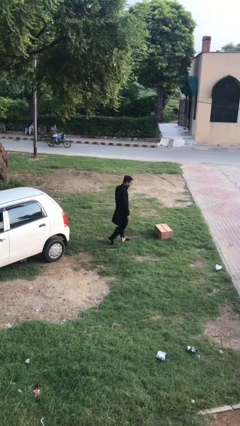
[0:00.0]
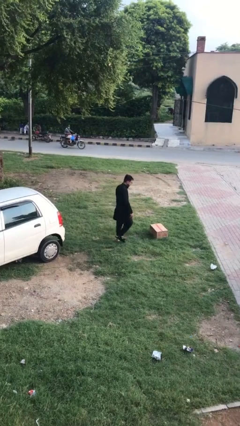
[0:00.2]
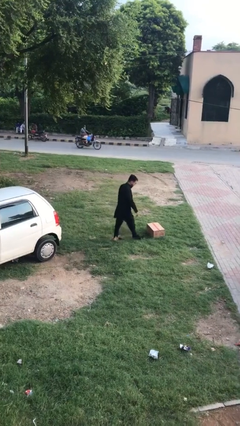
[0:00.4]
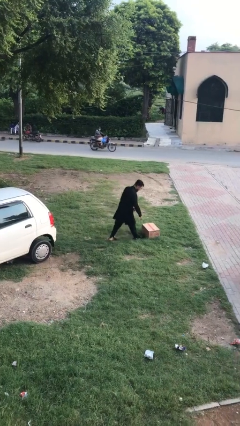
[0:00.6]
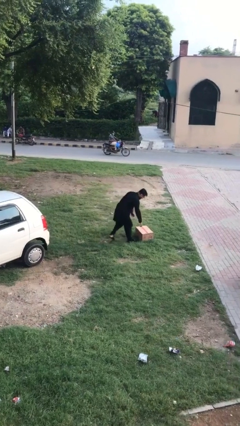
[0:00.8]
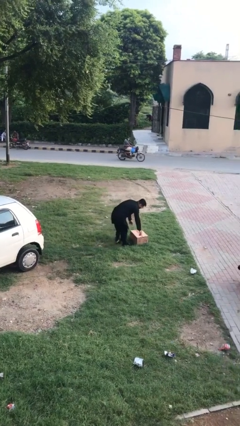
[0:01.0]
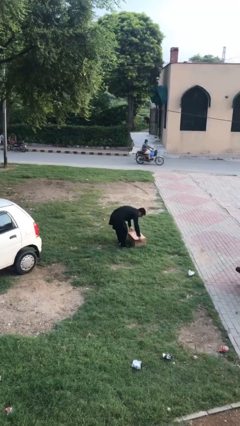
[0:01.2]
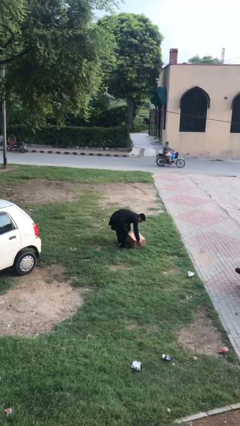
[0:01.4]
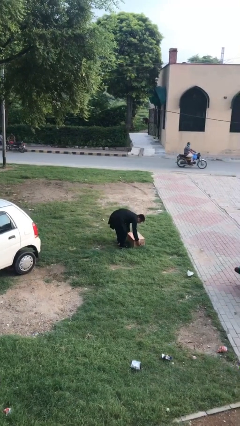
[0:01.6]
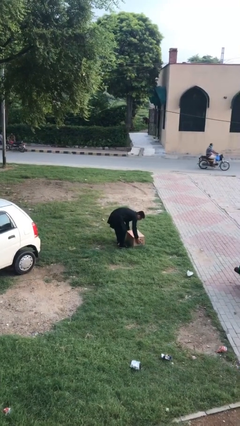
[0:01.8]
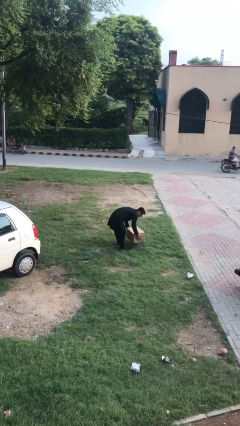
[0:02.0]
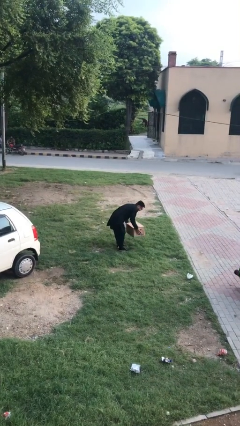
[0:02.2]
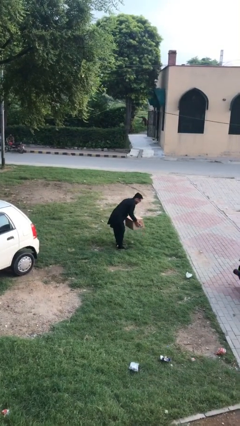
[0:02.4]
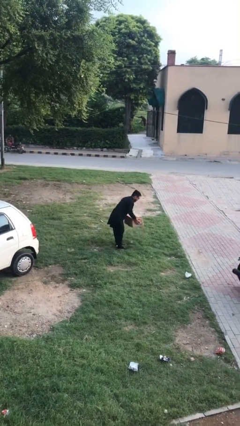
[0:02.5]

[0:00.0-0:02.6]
person picks up object from floor

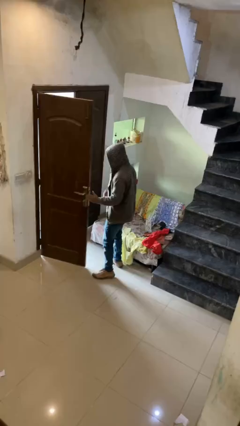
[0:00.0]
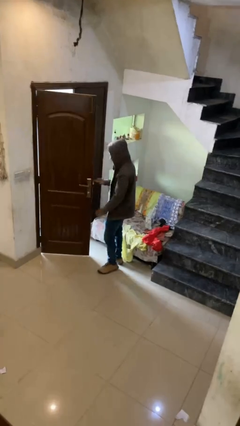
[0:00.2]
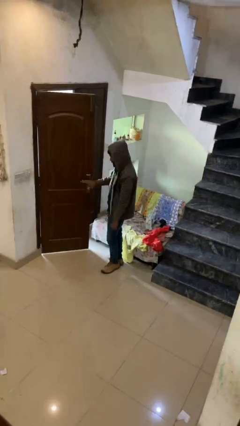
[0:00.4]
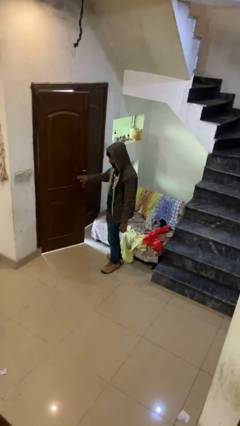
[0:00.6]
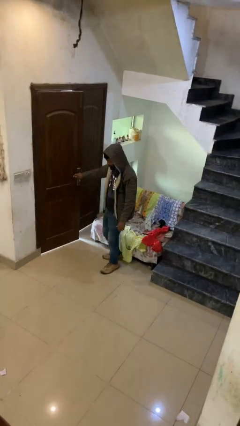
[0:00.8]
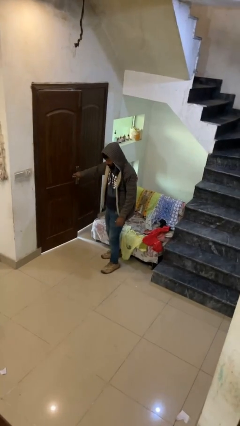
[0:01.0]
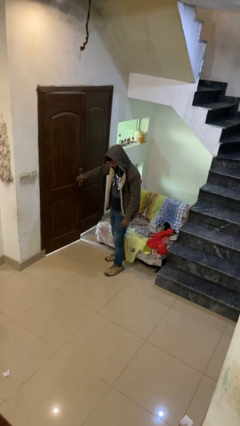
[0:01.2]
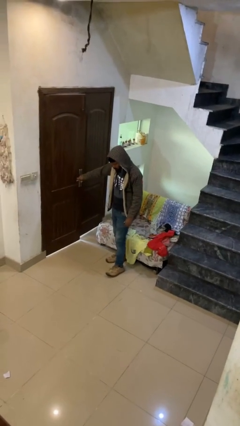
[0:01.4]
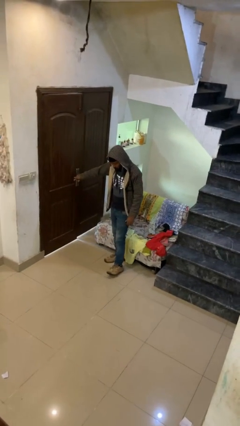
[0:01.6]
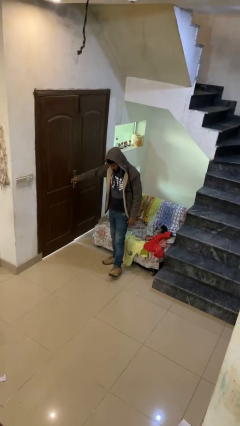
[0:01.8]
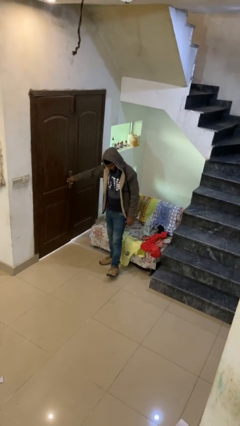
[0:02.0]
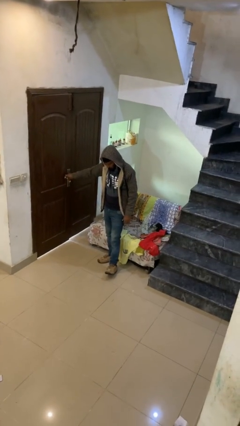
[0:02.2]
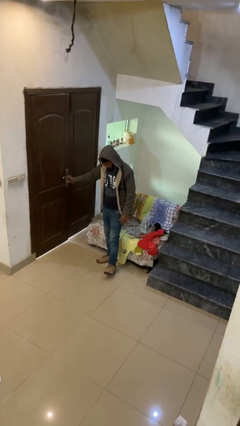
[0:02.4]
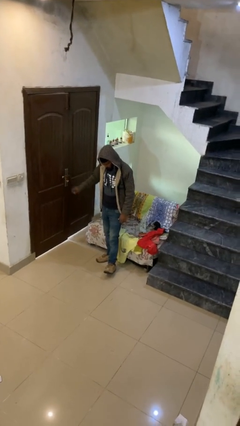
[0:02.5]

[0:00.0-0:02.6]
person closes facility door

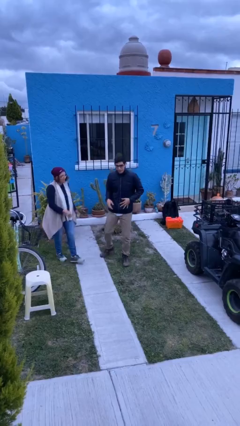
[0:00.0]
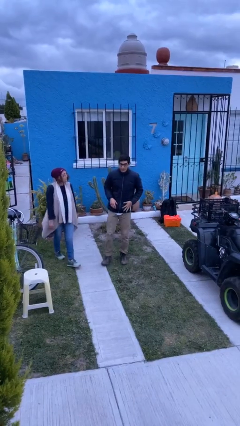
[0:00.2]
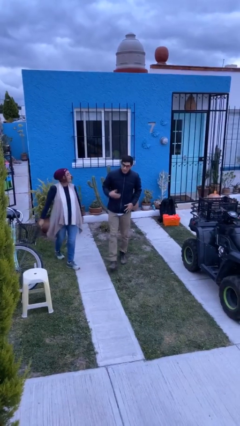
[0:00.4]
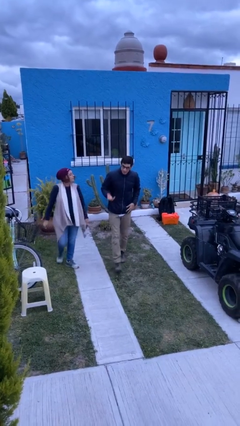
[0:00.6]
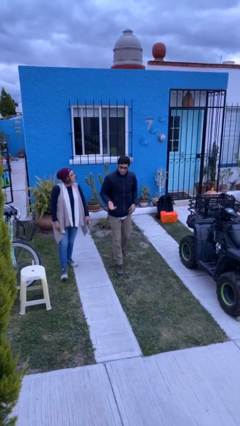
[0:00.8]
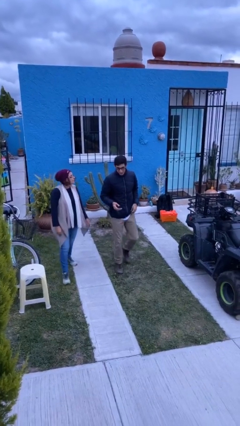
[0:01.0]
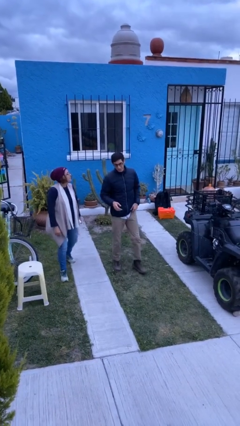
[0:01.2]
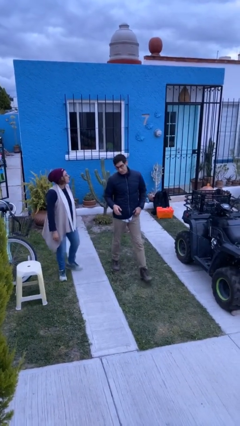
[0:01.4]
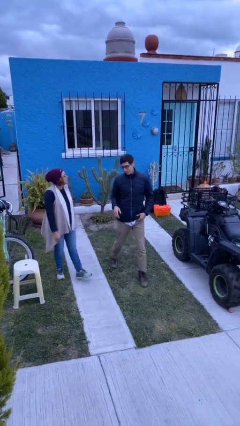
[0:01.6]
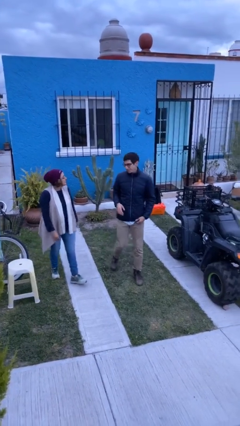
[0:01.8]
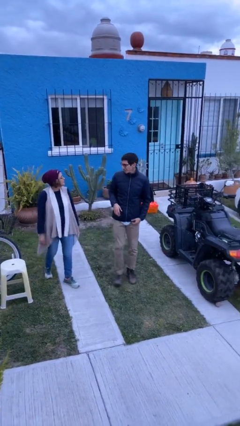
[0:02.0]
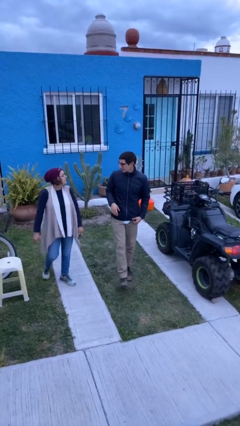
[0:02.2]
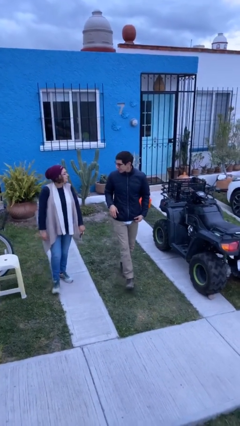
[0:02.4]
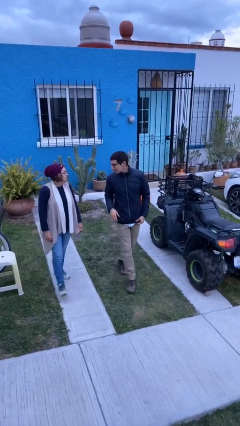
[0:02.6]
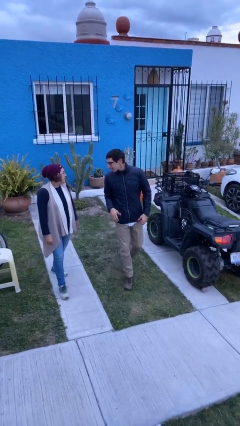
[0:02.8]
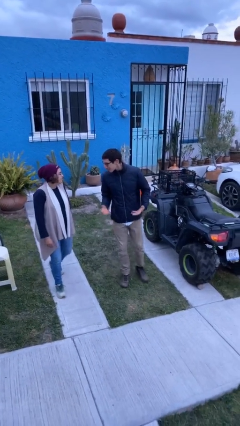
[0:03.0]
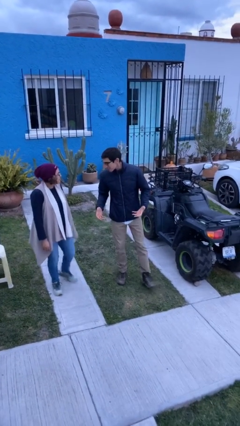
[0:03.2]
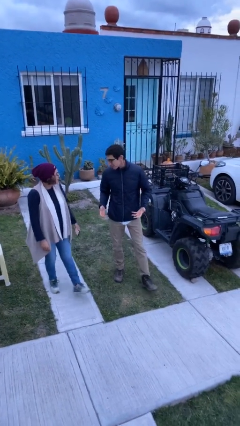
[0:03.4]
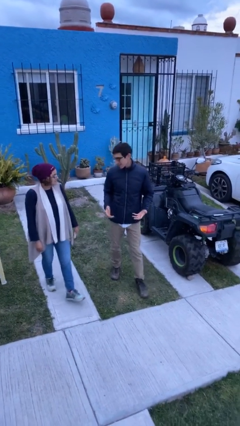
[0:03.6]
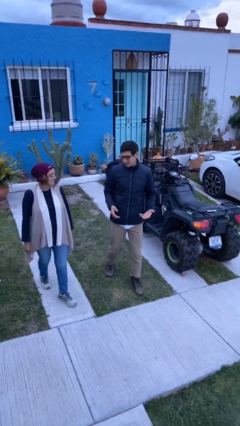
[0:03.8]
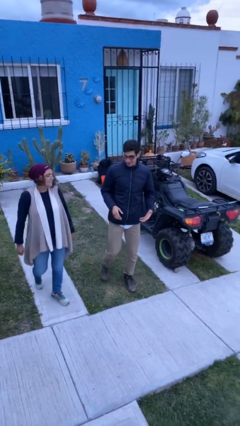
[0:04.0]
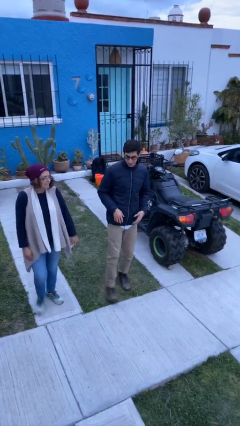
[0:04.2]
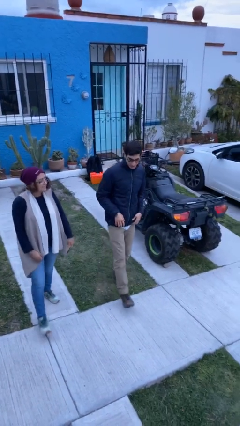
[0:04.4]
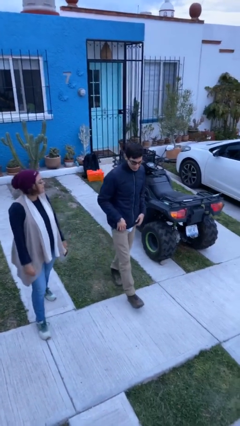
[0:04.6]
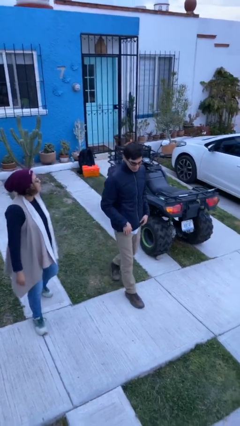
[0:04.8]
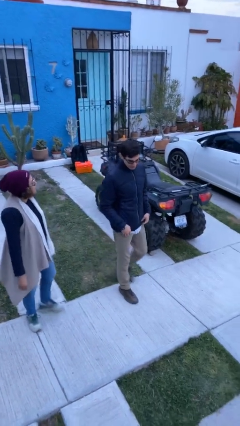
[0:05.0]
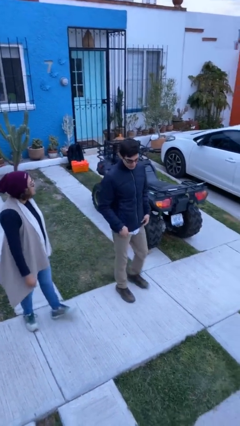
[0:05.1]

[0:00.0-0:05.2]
person talks to person

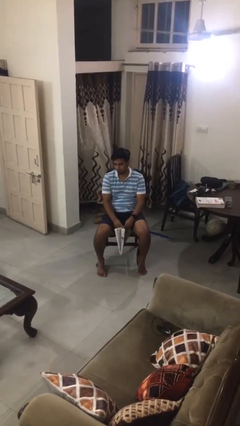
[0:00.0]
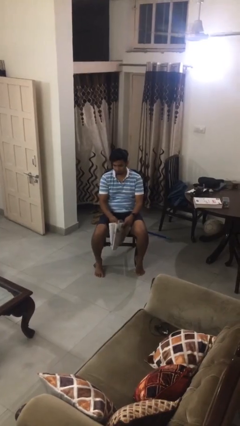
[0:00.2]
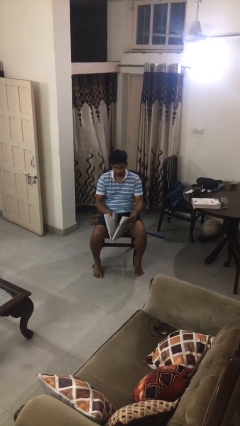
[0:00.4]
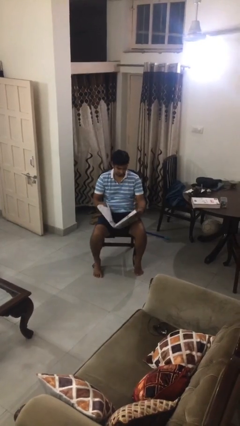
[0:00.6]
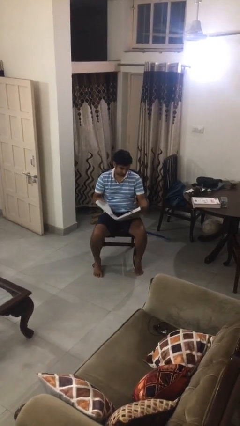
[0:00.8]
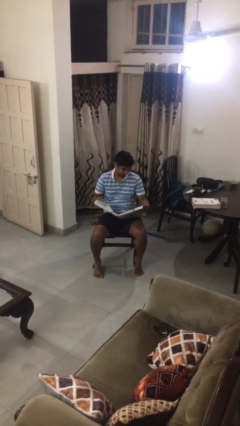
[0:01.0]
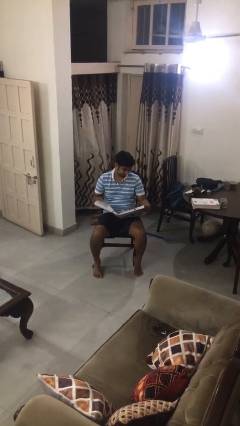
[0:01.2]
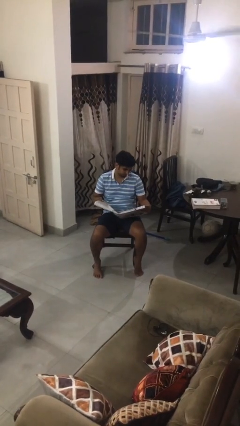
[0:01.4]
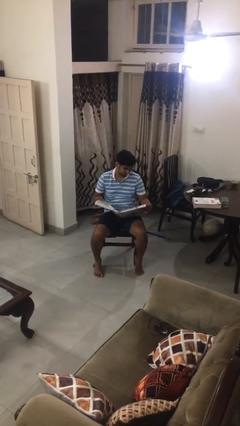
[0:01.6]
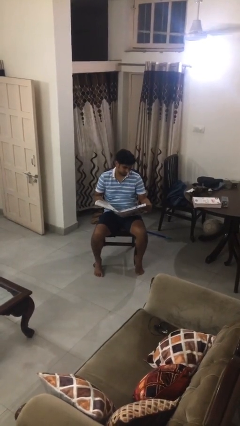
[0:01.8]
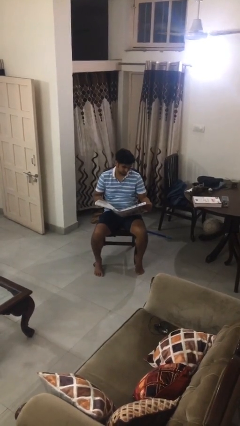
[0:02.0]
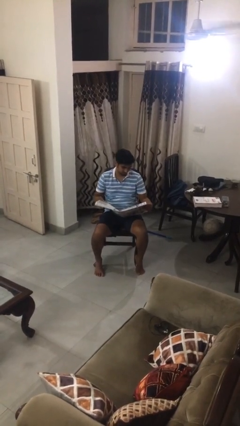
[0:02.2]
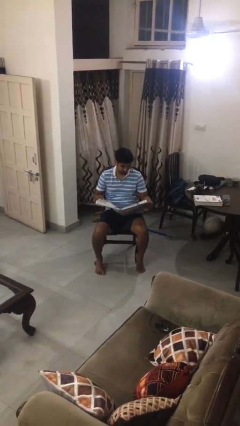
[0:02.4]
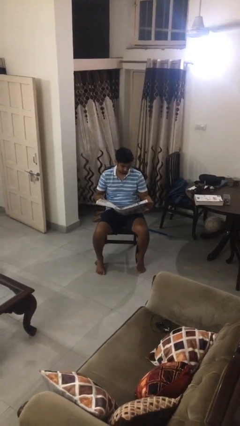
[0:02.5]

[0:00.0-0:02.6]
person reads newspaper

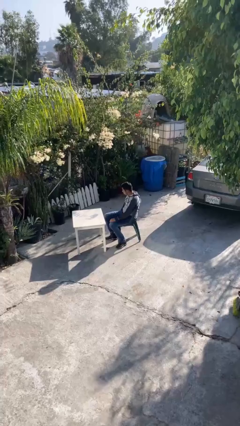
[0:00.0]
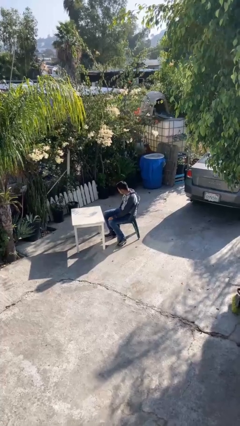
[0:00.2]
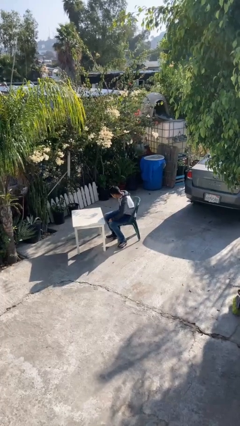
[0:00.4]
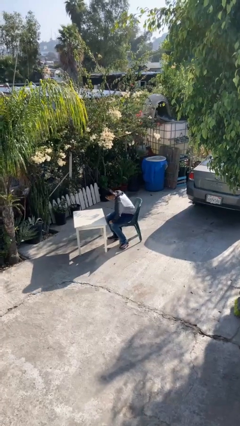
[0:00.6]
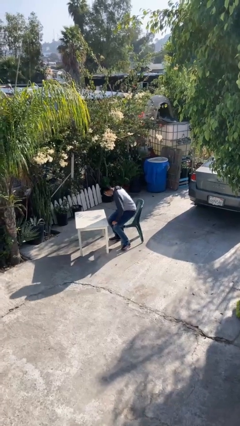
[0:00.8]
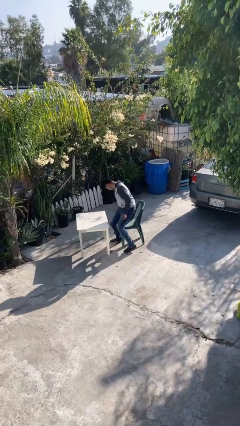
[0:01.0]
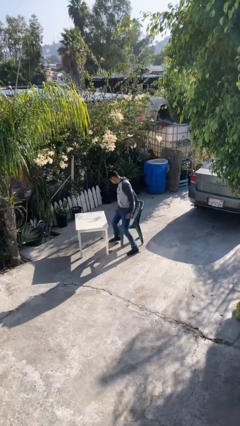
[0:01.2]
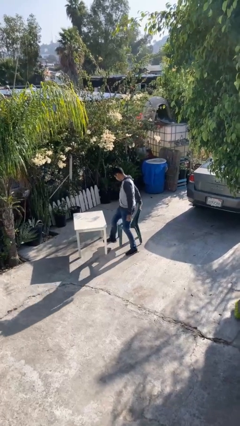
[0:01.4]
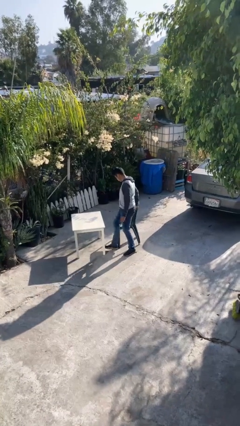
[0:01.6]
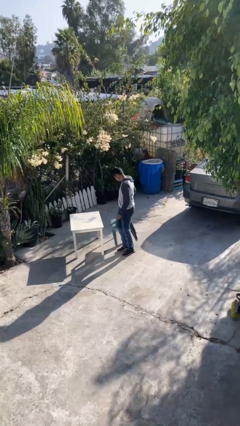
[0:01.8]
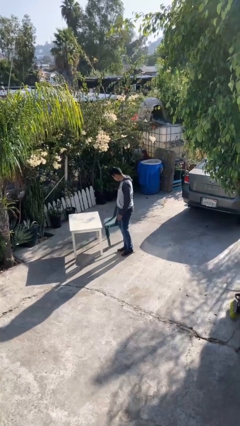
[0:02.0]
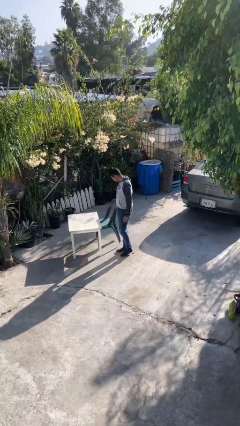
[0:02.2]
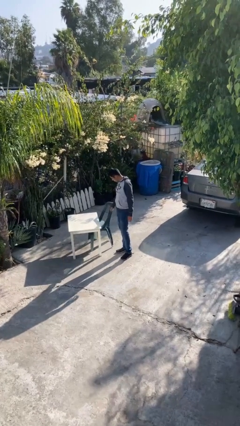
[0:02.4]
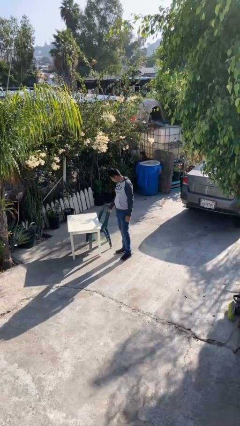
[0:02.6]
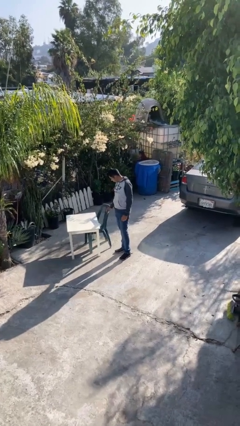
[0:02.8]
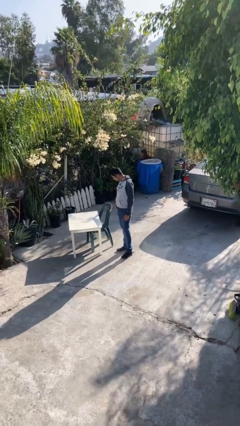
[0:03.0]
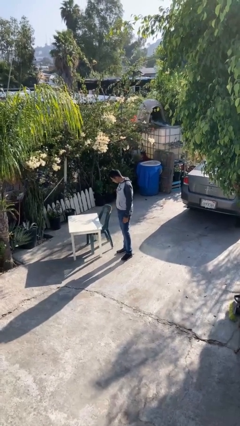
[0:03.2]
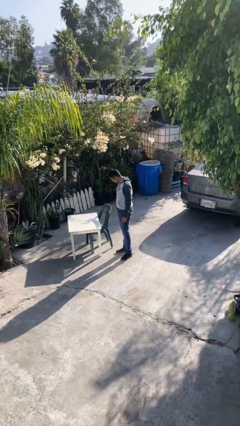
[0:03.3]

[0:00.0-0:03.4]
person stands up

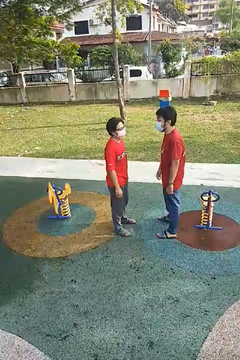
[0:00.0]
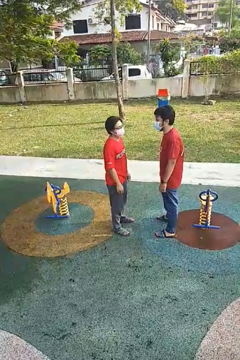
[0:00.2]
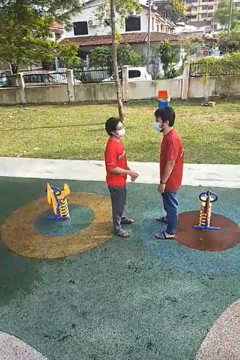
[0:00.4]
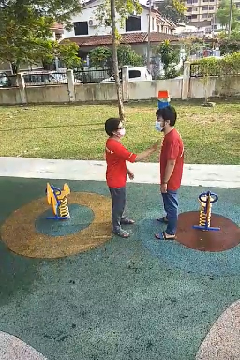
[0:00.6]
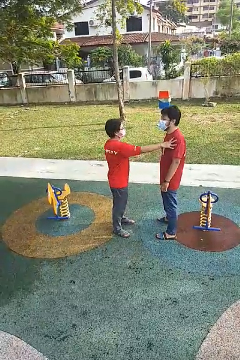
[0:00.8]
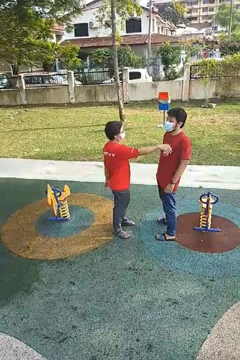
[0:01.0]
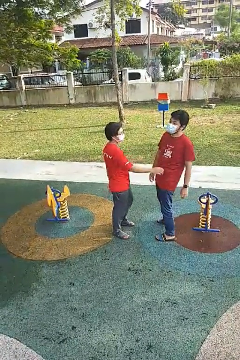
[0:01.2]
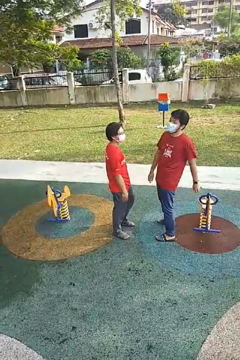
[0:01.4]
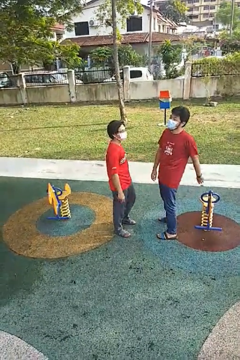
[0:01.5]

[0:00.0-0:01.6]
person shoves person
